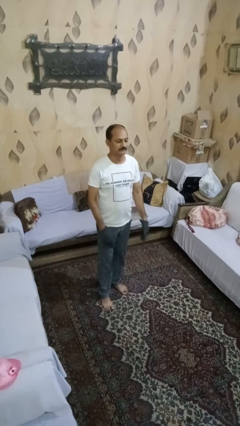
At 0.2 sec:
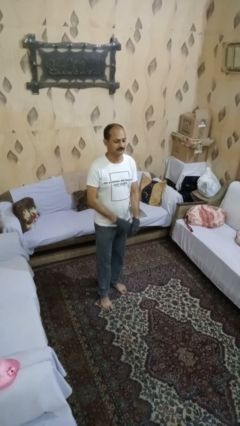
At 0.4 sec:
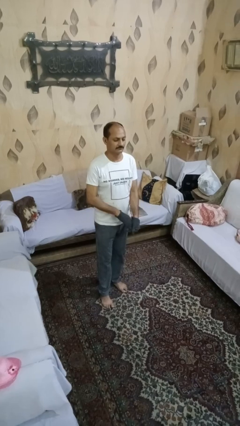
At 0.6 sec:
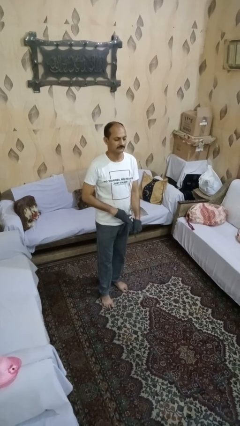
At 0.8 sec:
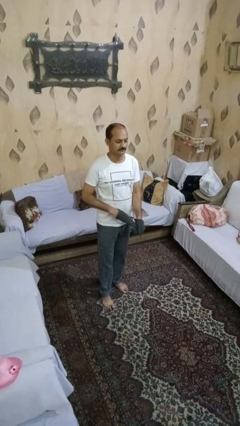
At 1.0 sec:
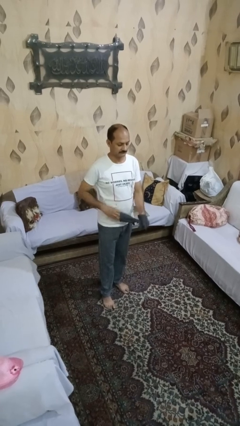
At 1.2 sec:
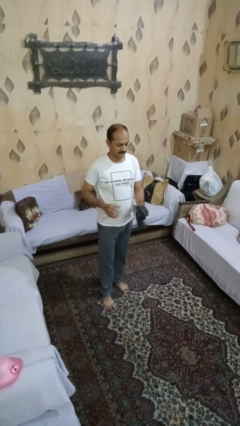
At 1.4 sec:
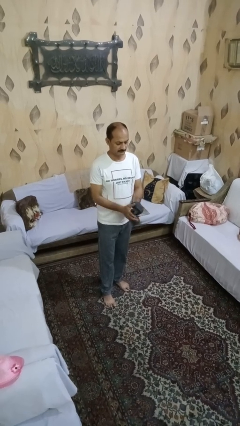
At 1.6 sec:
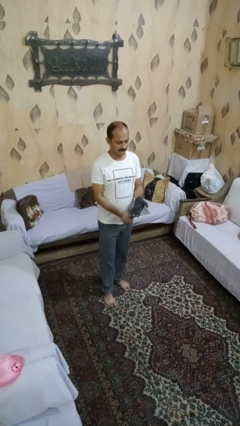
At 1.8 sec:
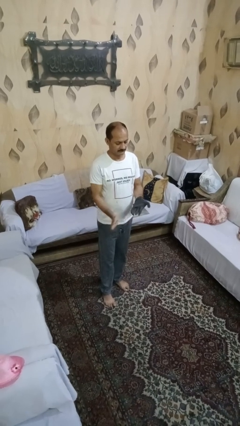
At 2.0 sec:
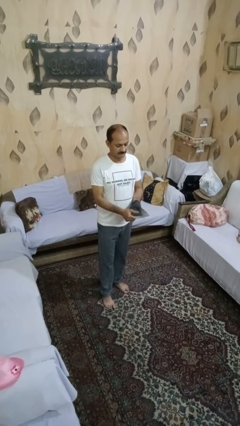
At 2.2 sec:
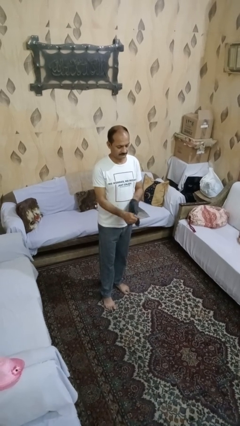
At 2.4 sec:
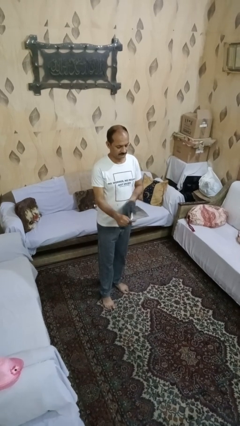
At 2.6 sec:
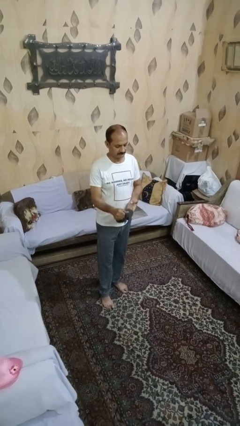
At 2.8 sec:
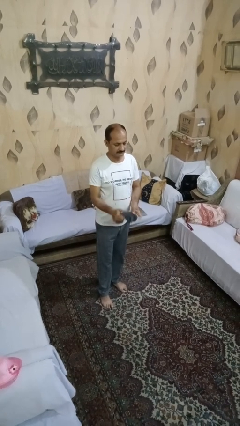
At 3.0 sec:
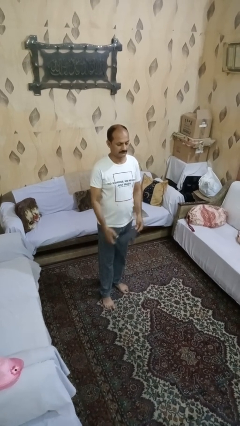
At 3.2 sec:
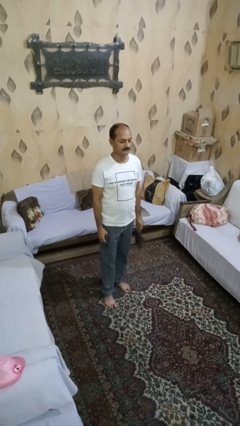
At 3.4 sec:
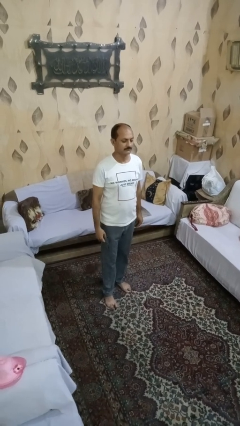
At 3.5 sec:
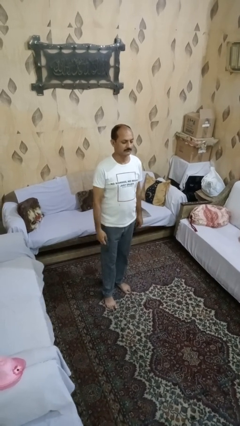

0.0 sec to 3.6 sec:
person takes off gloves

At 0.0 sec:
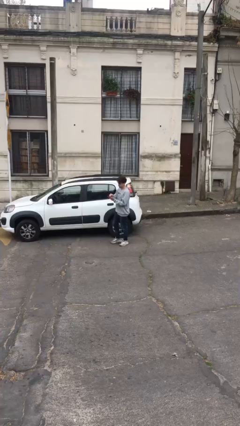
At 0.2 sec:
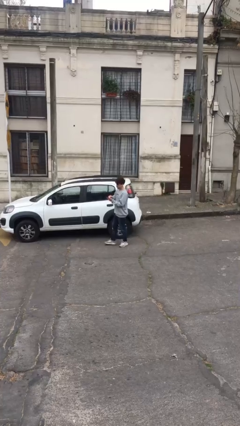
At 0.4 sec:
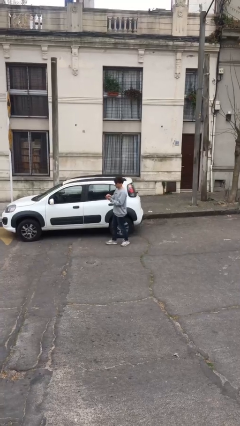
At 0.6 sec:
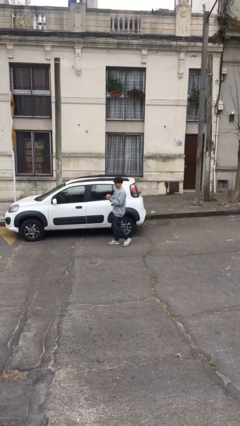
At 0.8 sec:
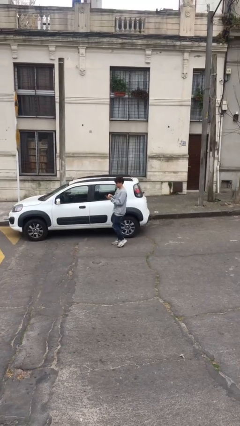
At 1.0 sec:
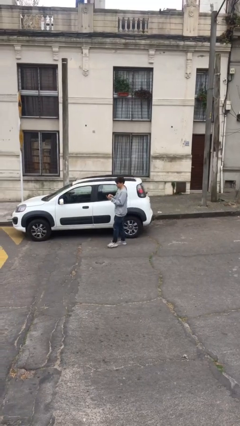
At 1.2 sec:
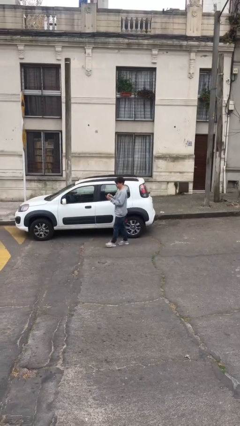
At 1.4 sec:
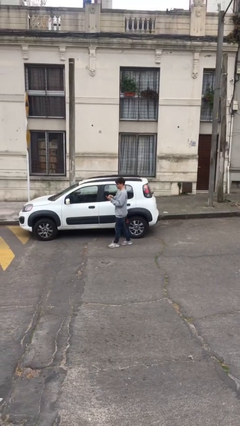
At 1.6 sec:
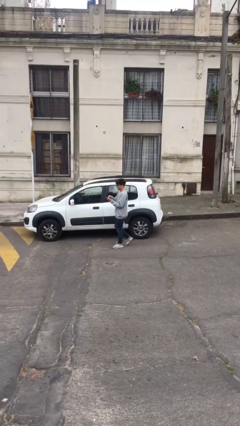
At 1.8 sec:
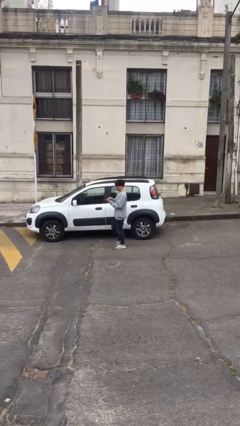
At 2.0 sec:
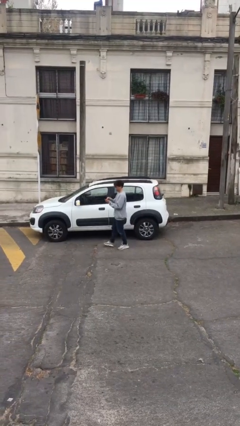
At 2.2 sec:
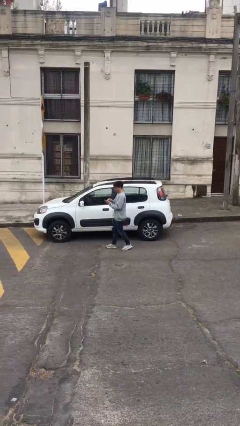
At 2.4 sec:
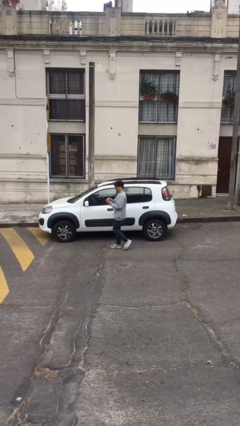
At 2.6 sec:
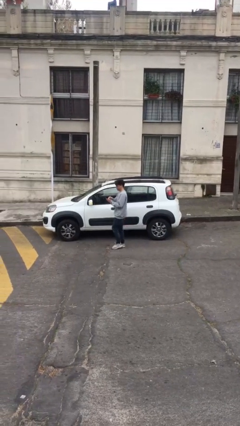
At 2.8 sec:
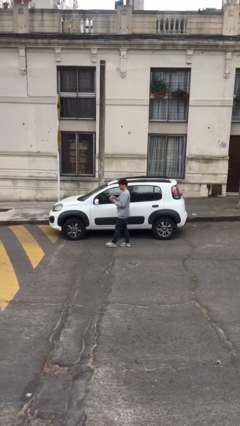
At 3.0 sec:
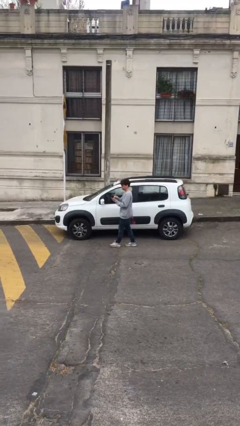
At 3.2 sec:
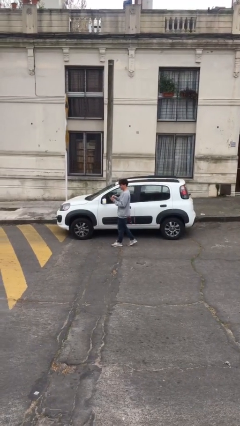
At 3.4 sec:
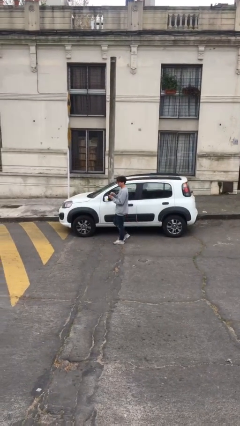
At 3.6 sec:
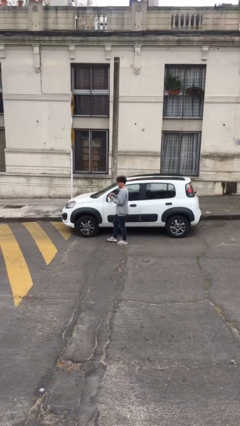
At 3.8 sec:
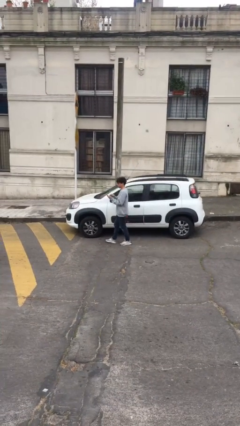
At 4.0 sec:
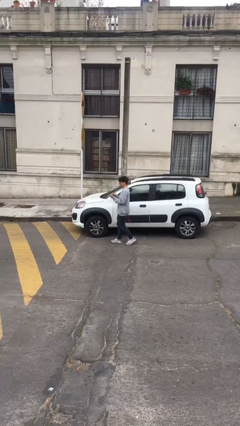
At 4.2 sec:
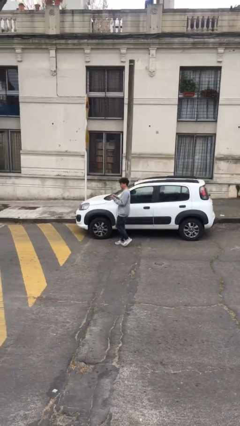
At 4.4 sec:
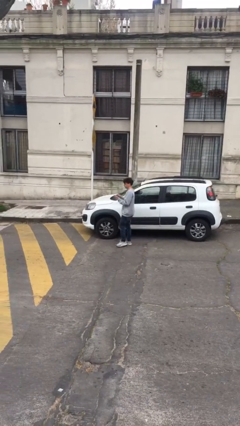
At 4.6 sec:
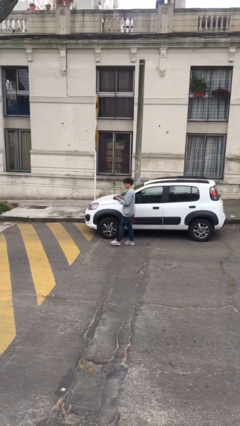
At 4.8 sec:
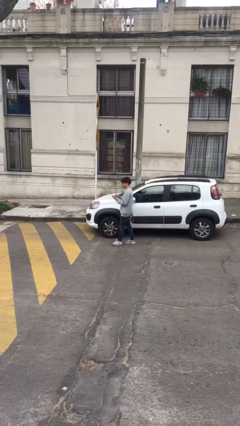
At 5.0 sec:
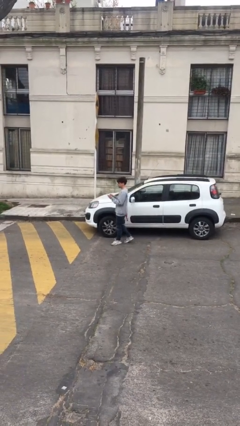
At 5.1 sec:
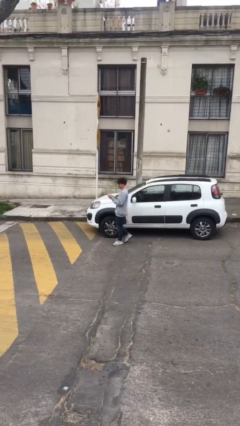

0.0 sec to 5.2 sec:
person texts on phone

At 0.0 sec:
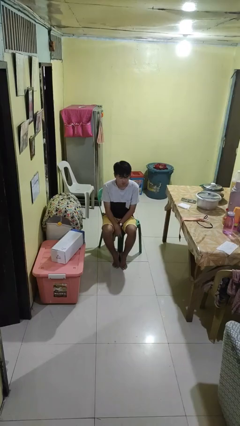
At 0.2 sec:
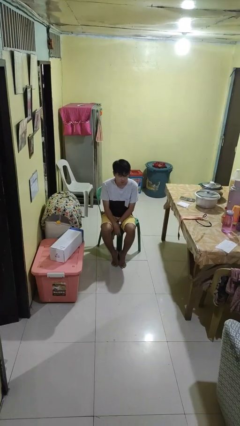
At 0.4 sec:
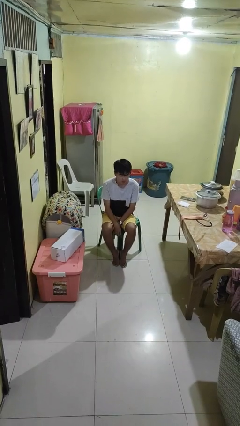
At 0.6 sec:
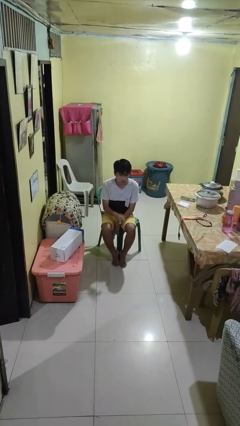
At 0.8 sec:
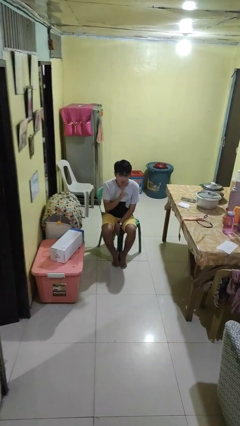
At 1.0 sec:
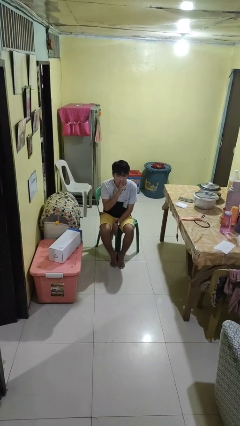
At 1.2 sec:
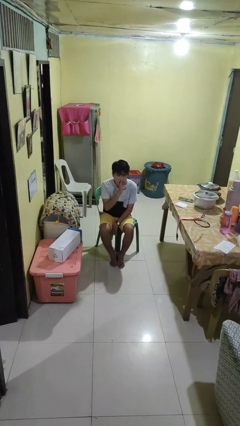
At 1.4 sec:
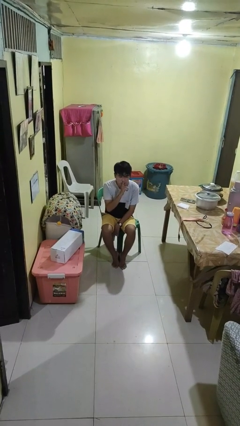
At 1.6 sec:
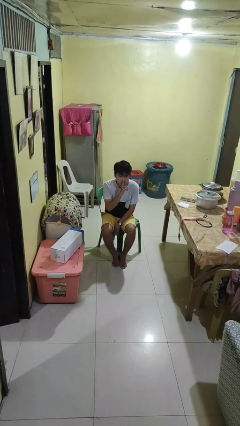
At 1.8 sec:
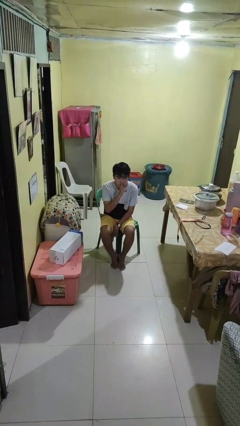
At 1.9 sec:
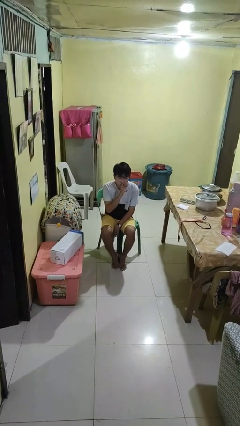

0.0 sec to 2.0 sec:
person gestures be quiet

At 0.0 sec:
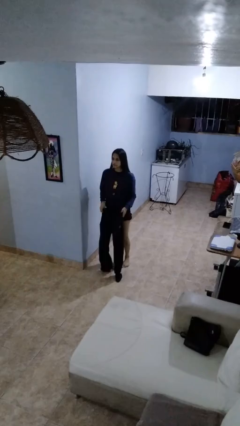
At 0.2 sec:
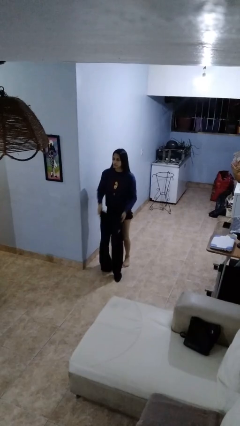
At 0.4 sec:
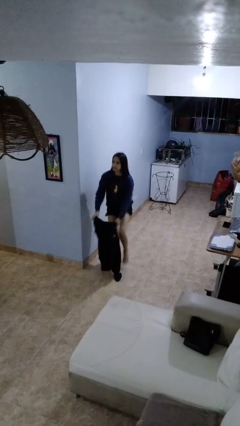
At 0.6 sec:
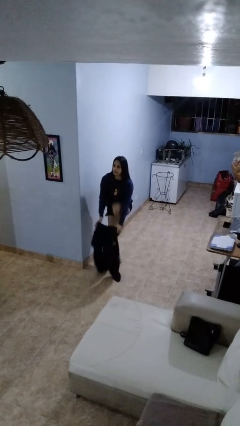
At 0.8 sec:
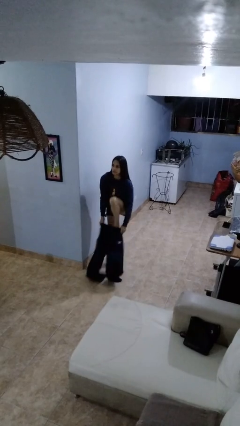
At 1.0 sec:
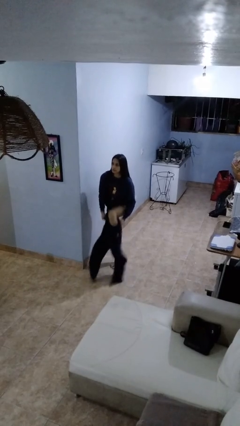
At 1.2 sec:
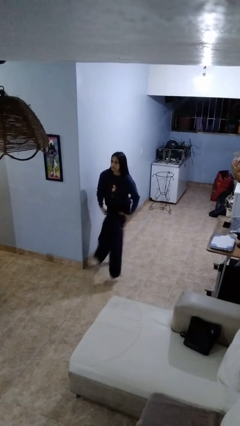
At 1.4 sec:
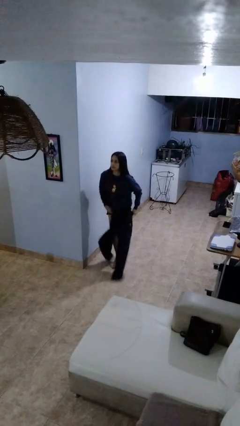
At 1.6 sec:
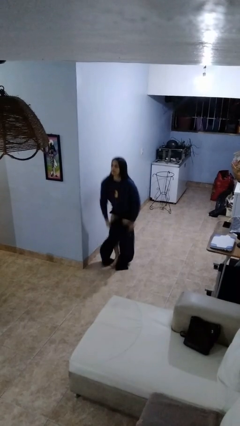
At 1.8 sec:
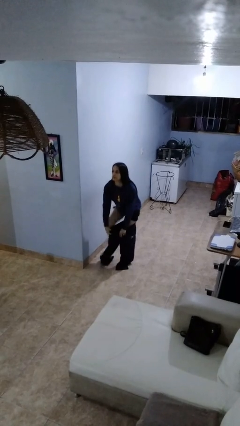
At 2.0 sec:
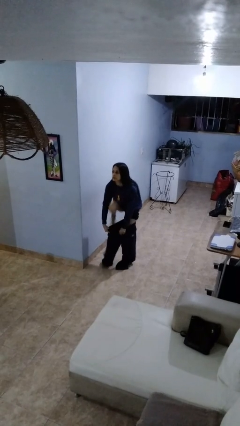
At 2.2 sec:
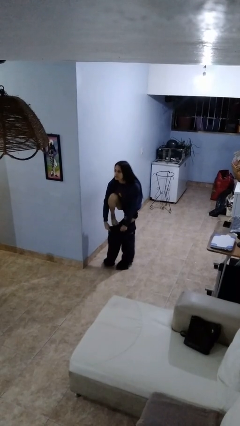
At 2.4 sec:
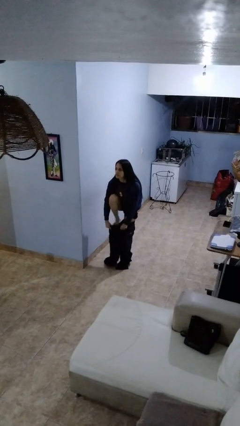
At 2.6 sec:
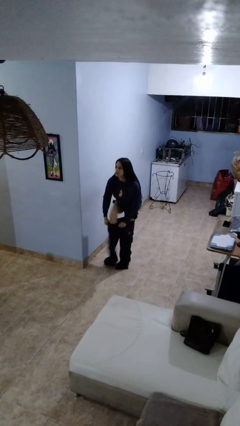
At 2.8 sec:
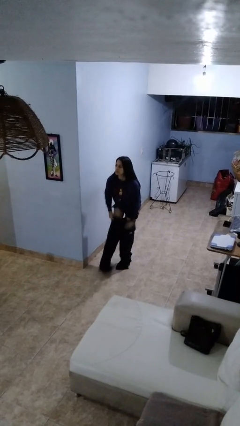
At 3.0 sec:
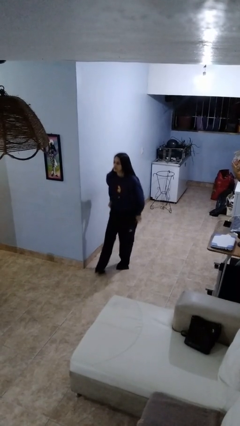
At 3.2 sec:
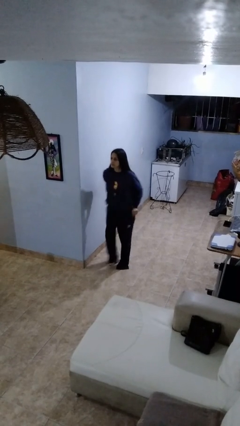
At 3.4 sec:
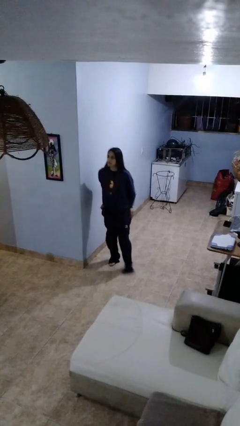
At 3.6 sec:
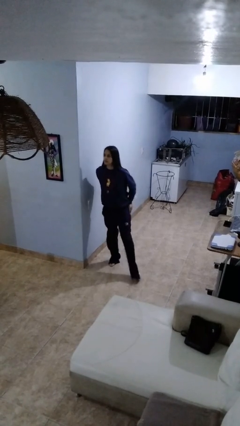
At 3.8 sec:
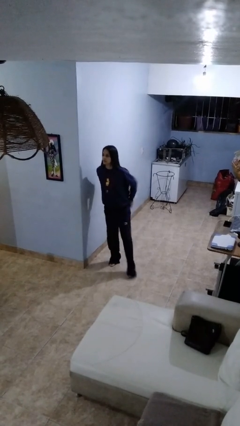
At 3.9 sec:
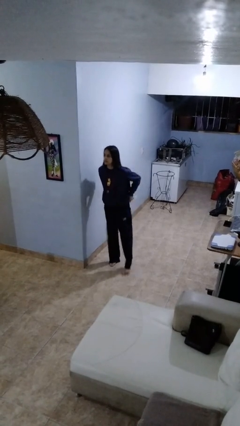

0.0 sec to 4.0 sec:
person puts on pants

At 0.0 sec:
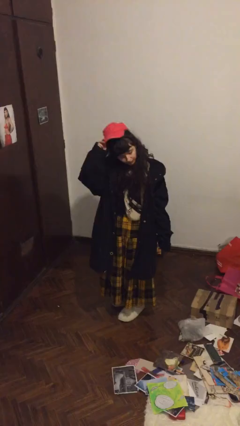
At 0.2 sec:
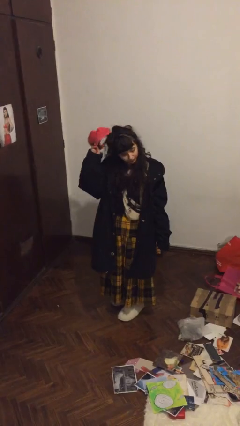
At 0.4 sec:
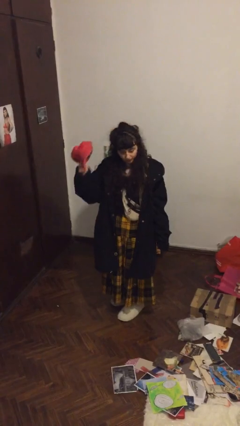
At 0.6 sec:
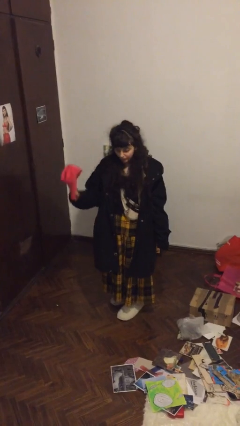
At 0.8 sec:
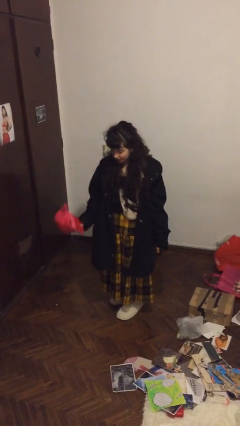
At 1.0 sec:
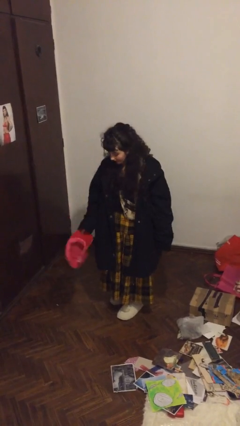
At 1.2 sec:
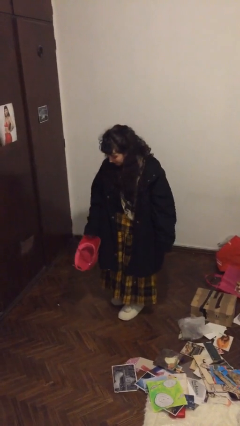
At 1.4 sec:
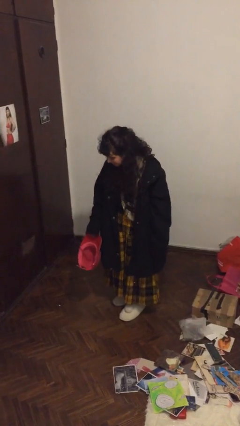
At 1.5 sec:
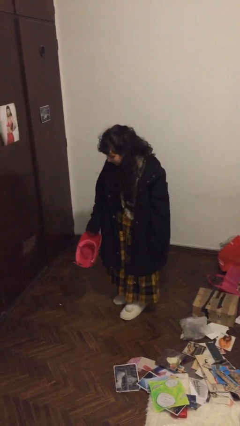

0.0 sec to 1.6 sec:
person takes off hat

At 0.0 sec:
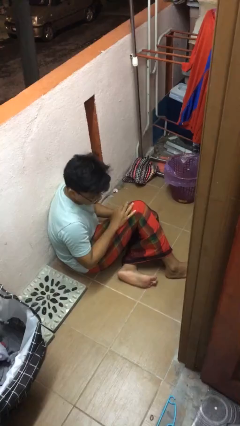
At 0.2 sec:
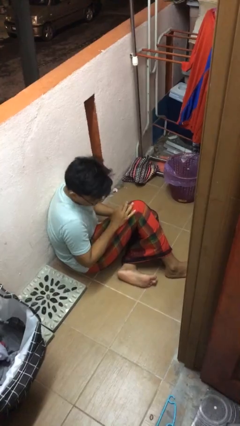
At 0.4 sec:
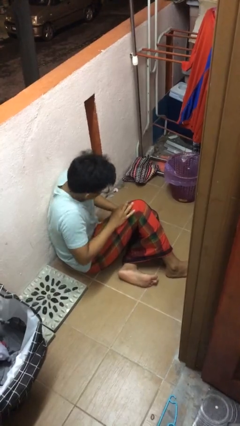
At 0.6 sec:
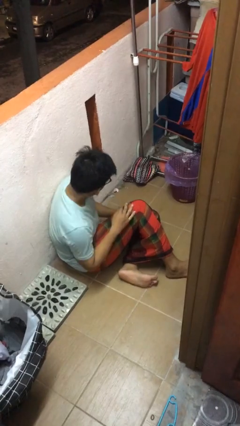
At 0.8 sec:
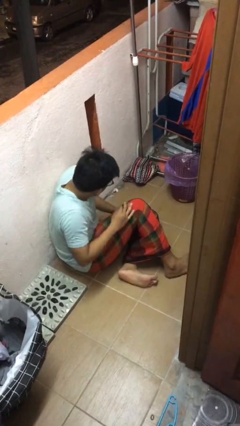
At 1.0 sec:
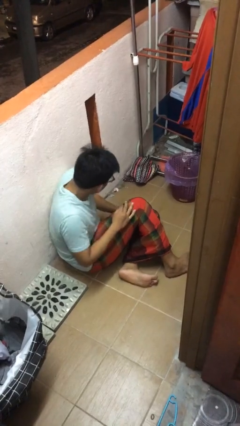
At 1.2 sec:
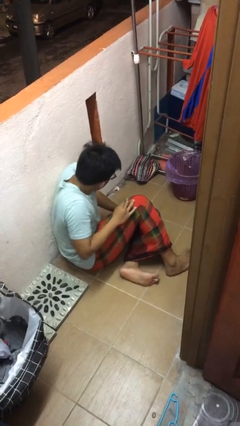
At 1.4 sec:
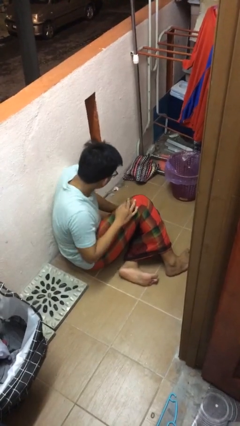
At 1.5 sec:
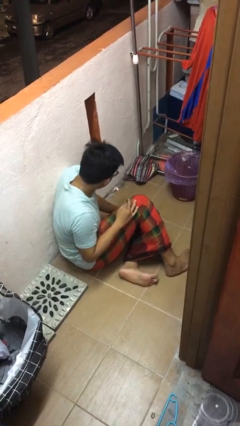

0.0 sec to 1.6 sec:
person shrugs
